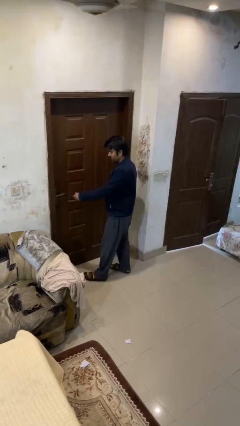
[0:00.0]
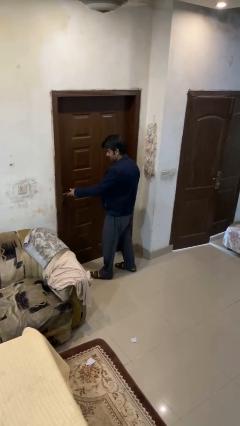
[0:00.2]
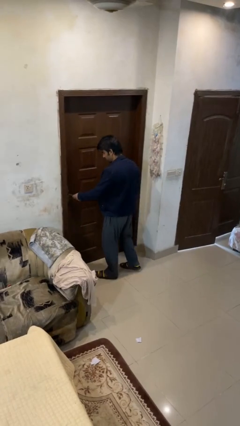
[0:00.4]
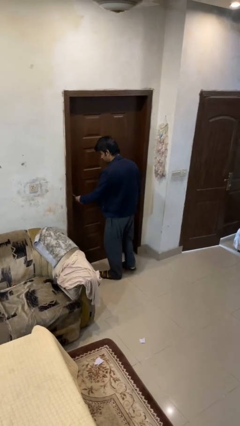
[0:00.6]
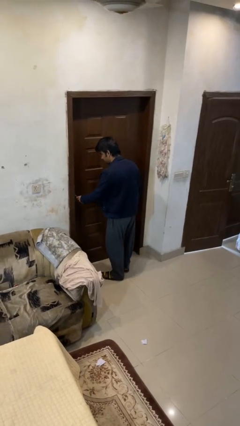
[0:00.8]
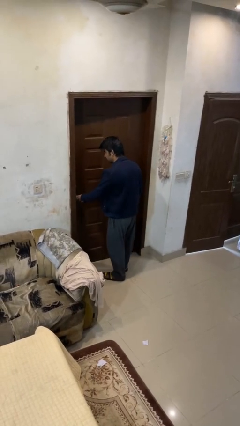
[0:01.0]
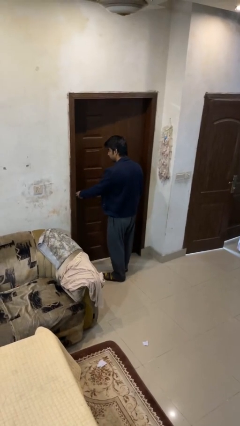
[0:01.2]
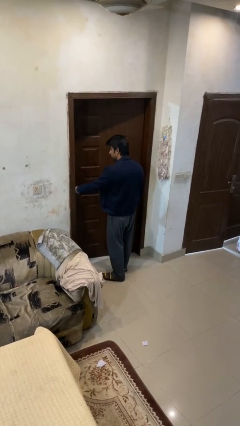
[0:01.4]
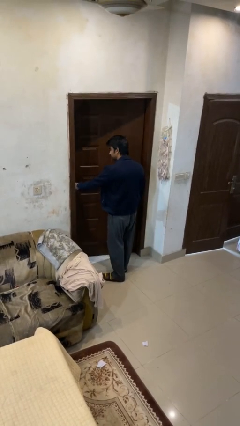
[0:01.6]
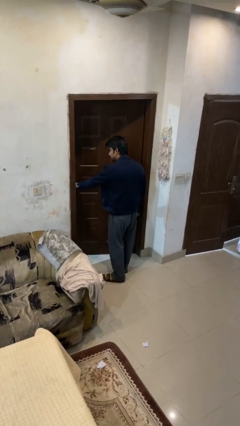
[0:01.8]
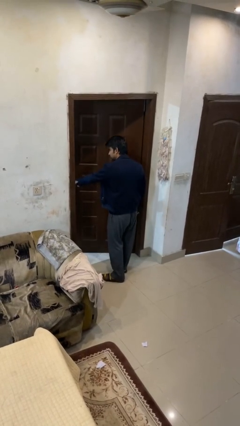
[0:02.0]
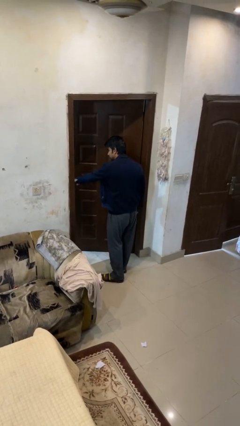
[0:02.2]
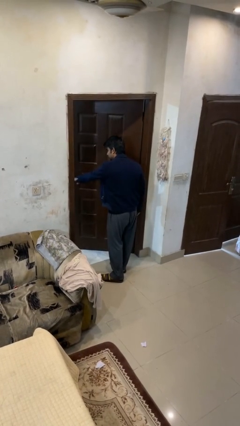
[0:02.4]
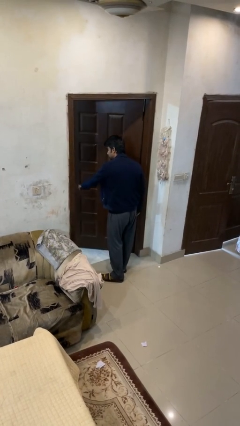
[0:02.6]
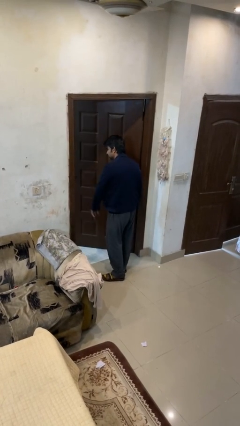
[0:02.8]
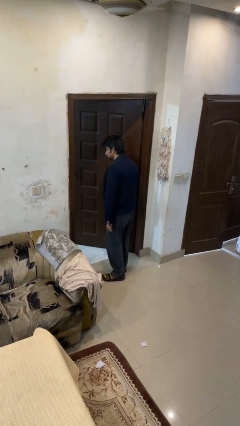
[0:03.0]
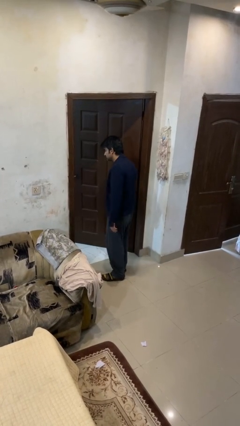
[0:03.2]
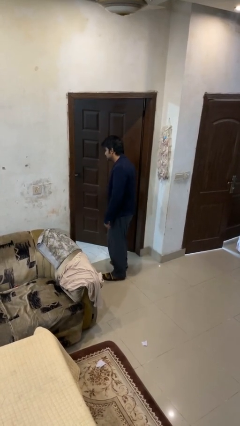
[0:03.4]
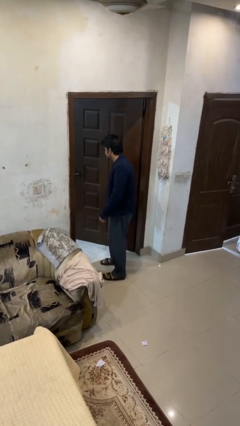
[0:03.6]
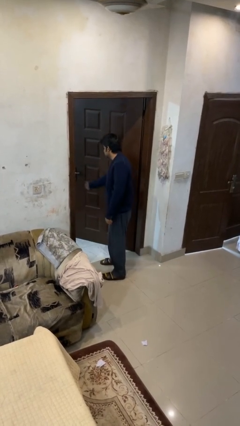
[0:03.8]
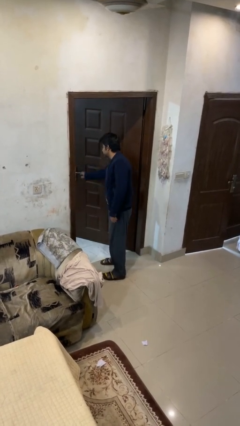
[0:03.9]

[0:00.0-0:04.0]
person opens facility door

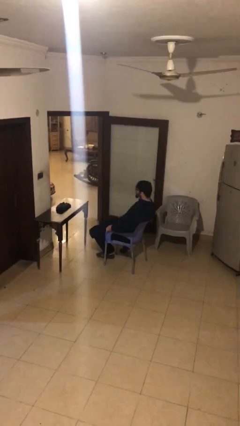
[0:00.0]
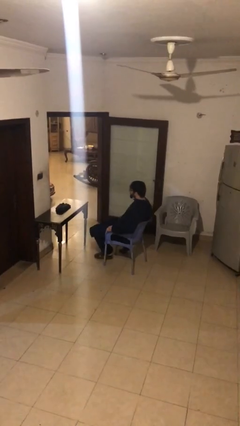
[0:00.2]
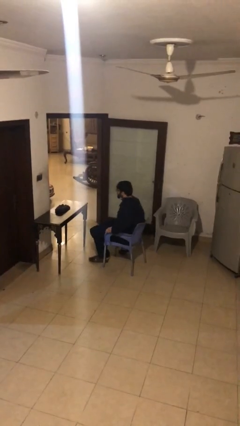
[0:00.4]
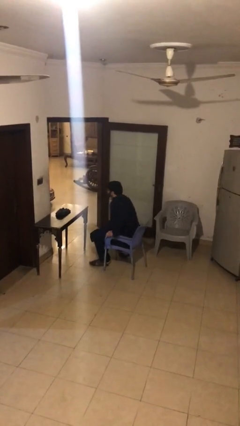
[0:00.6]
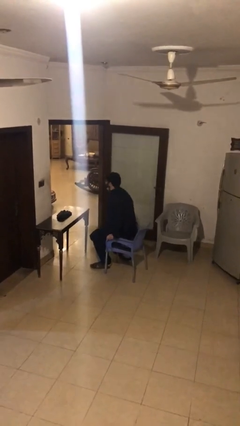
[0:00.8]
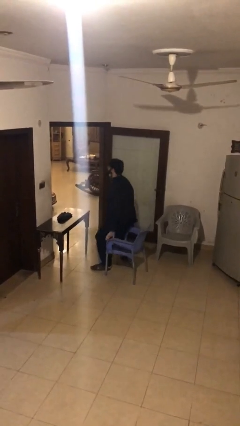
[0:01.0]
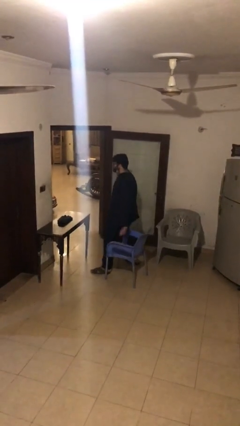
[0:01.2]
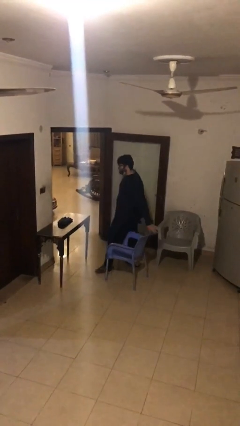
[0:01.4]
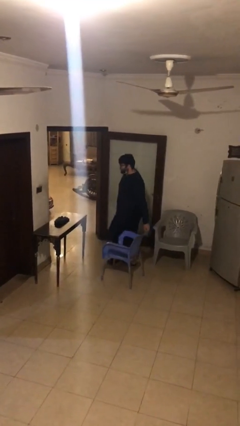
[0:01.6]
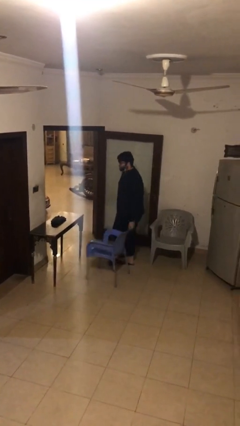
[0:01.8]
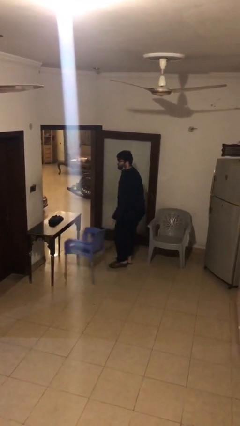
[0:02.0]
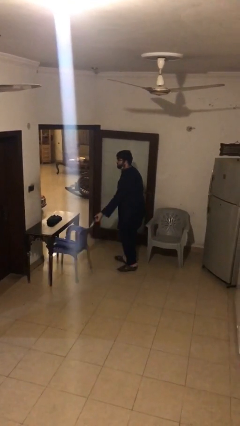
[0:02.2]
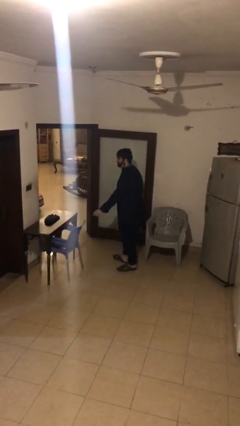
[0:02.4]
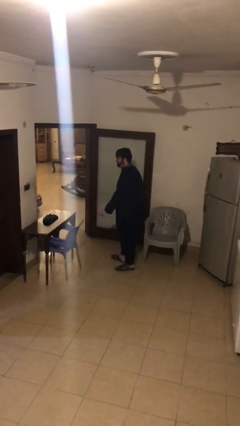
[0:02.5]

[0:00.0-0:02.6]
person stands up

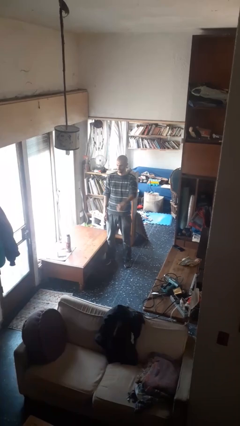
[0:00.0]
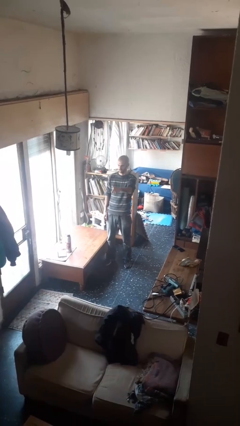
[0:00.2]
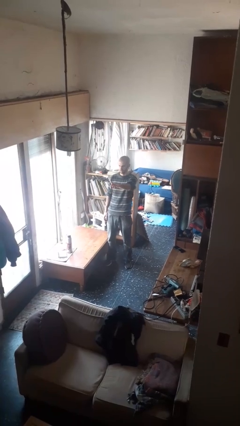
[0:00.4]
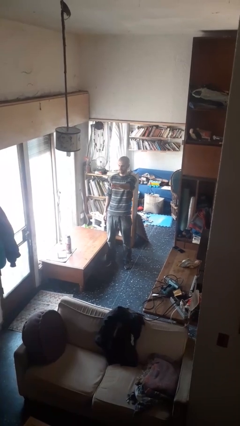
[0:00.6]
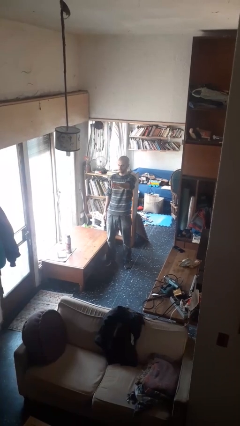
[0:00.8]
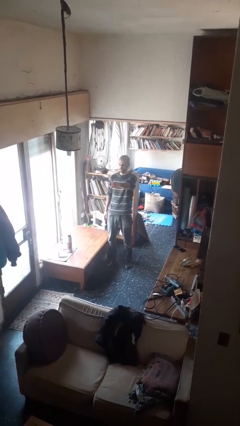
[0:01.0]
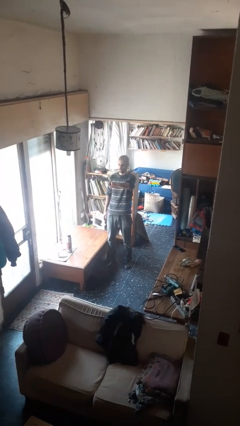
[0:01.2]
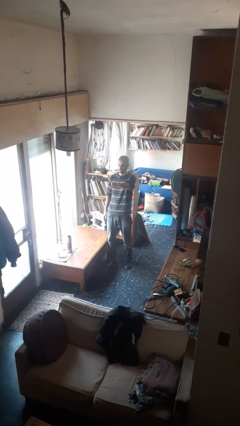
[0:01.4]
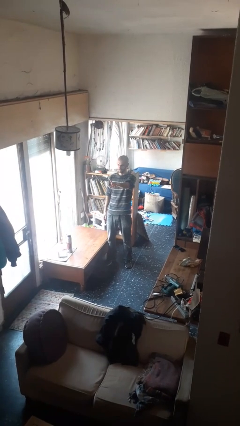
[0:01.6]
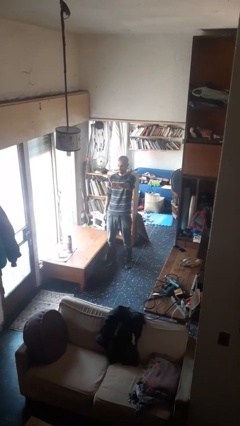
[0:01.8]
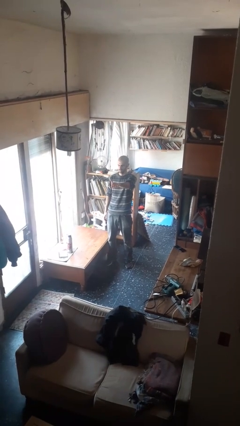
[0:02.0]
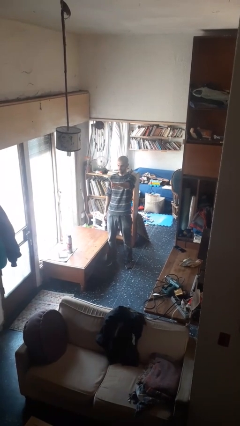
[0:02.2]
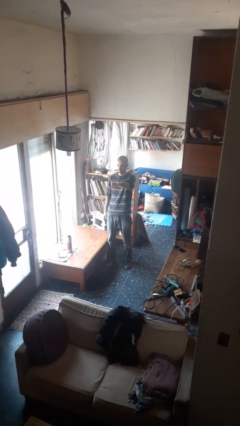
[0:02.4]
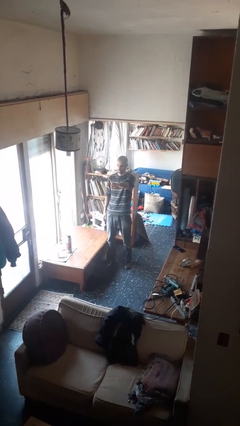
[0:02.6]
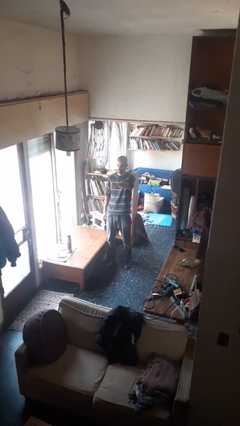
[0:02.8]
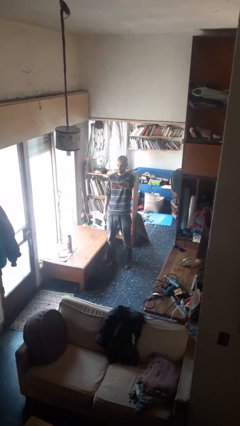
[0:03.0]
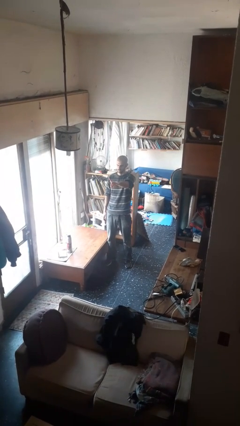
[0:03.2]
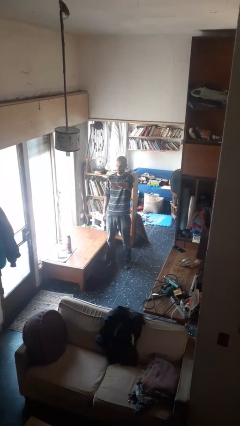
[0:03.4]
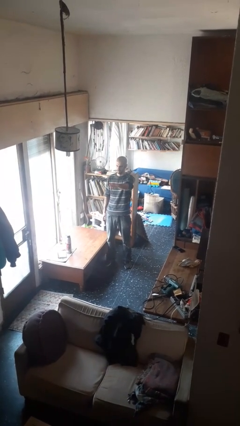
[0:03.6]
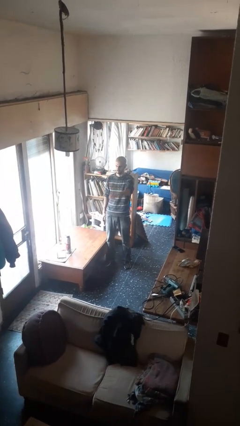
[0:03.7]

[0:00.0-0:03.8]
person gestures number one

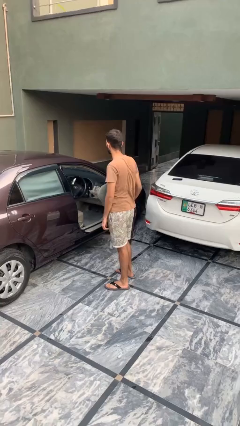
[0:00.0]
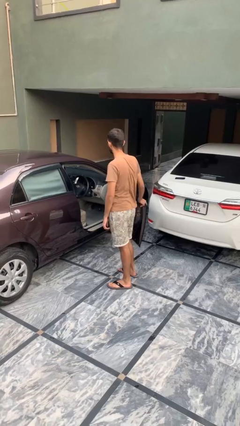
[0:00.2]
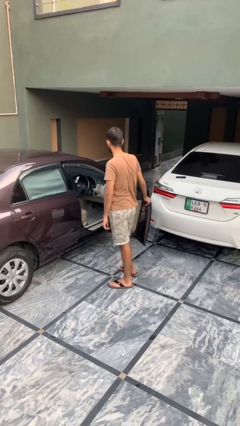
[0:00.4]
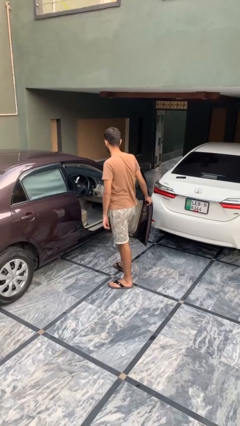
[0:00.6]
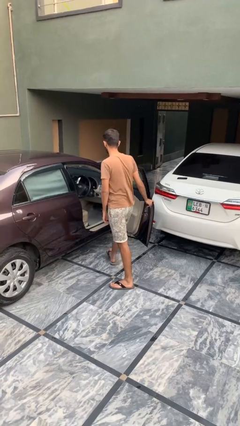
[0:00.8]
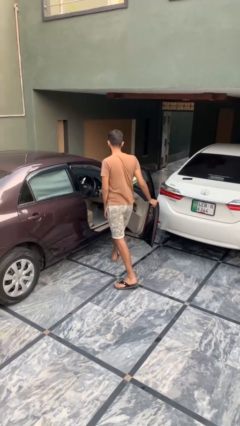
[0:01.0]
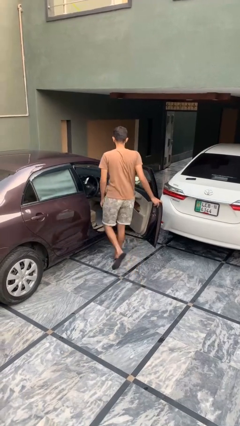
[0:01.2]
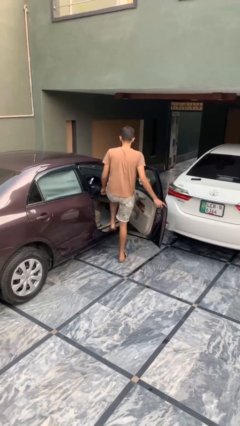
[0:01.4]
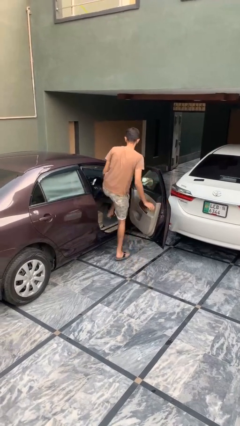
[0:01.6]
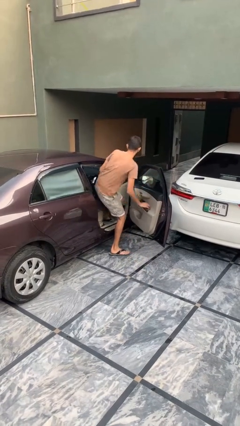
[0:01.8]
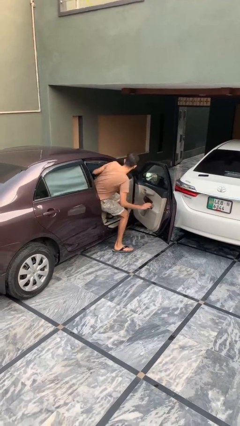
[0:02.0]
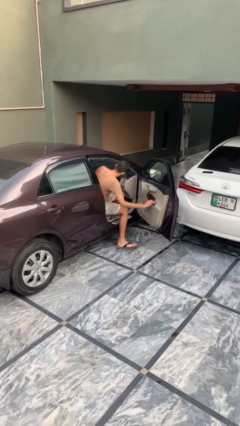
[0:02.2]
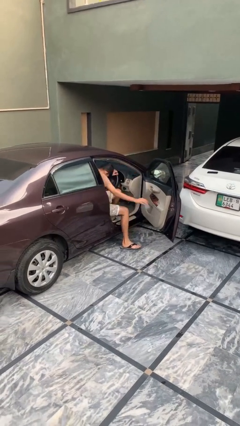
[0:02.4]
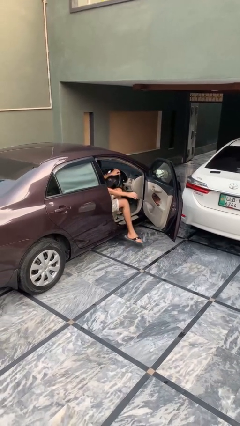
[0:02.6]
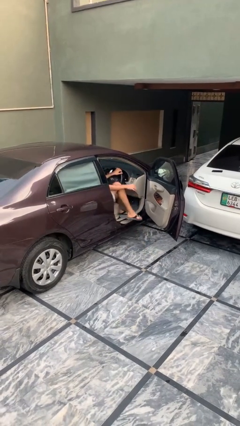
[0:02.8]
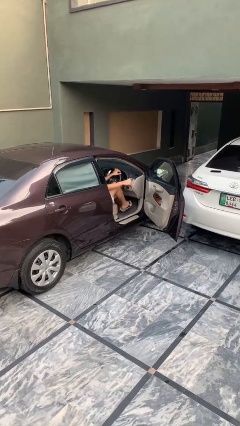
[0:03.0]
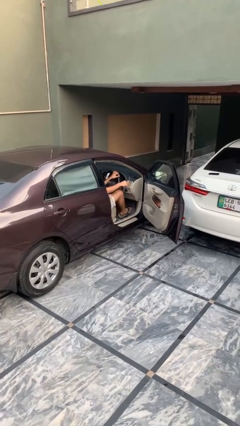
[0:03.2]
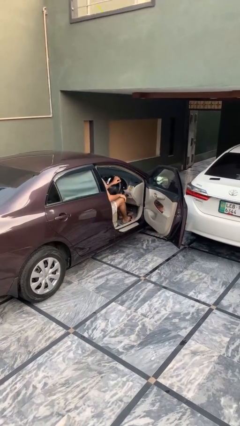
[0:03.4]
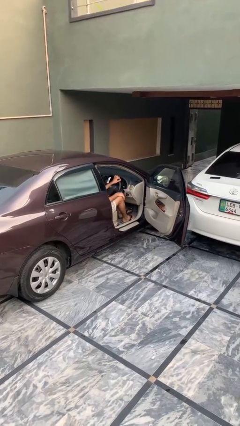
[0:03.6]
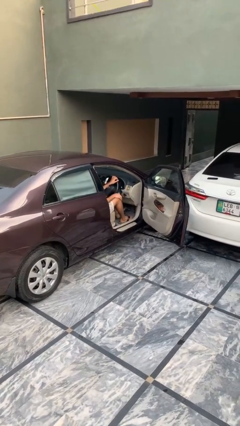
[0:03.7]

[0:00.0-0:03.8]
person enters car

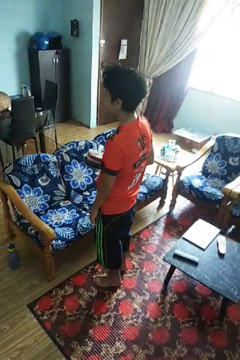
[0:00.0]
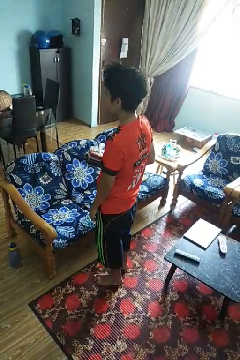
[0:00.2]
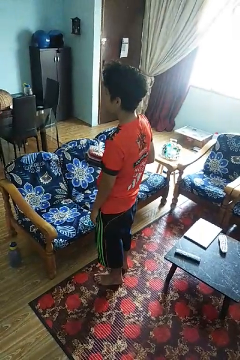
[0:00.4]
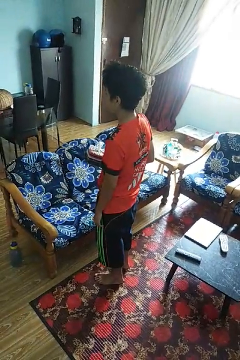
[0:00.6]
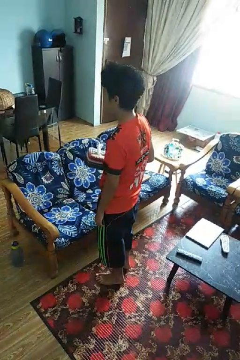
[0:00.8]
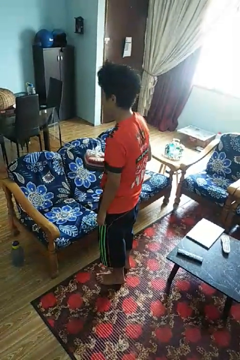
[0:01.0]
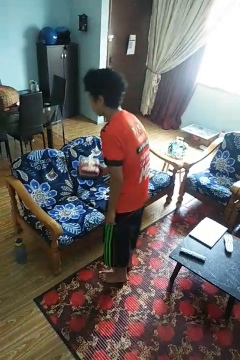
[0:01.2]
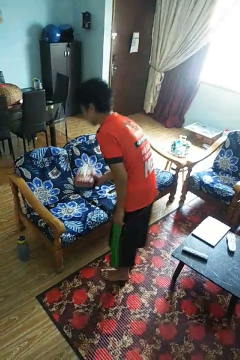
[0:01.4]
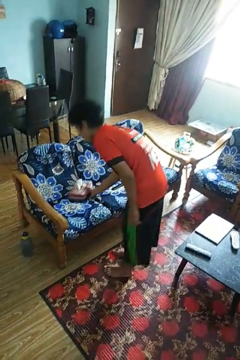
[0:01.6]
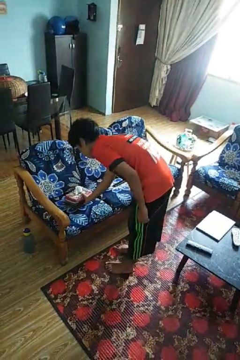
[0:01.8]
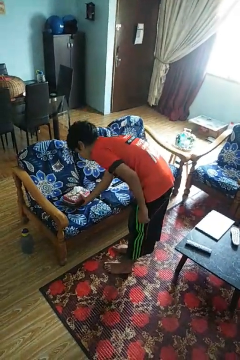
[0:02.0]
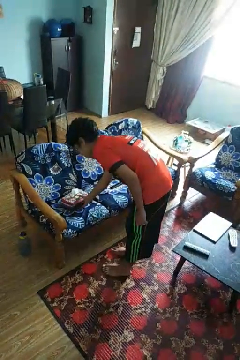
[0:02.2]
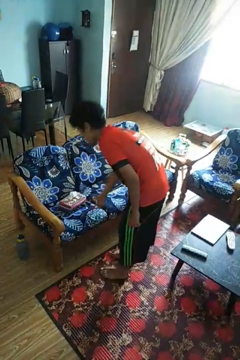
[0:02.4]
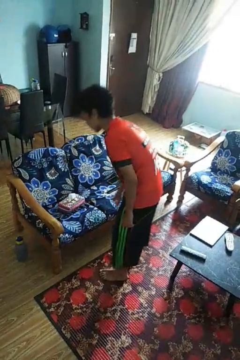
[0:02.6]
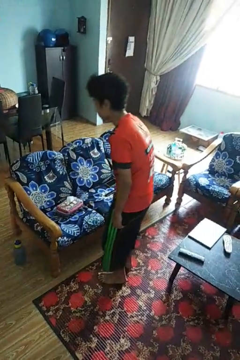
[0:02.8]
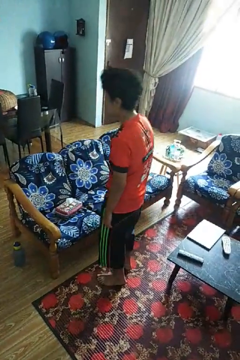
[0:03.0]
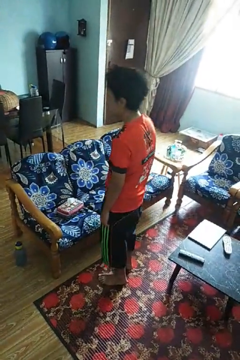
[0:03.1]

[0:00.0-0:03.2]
person puts down object on couch
